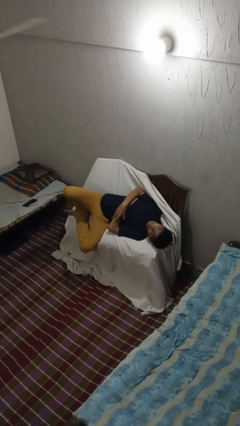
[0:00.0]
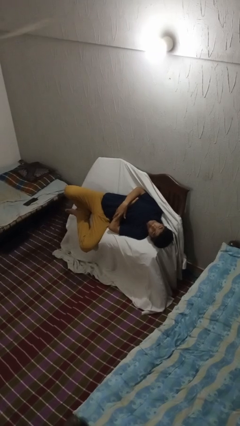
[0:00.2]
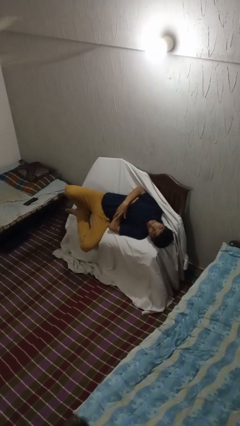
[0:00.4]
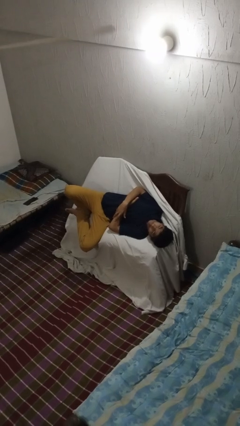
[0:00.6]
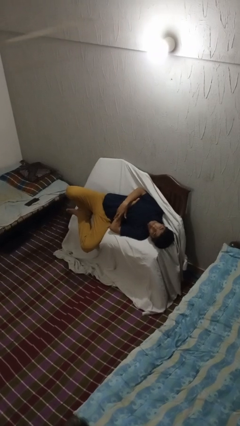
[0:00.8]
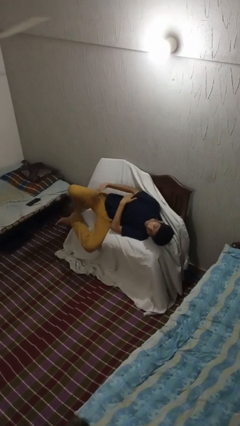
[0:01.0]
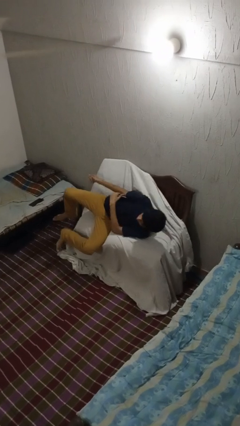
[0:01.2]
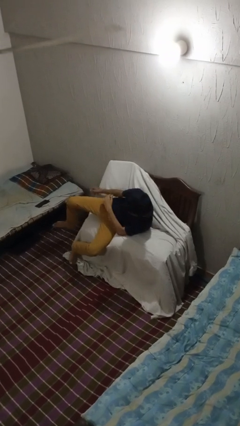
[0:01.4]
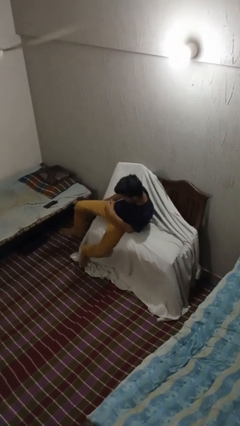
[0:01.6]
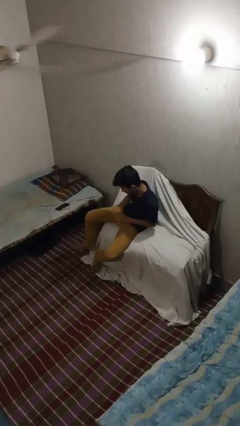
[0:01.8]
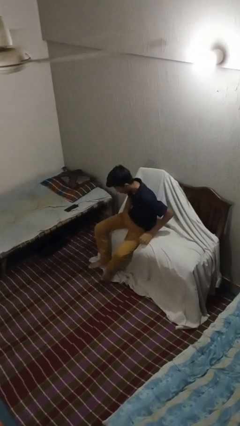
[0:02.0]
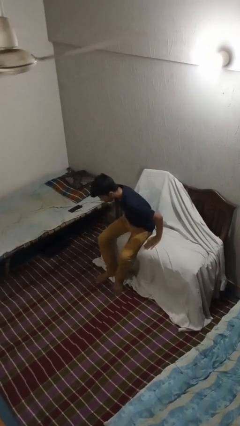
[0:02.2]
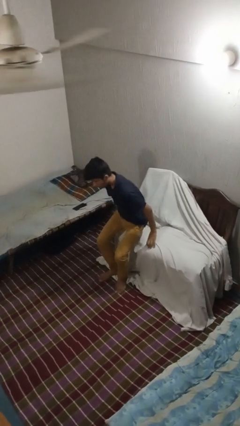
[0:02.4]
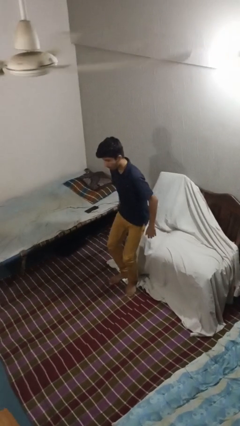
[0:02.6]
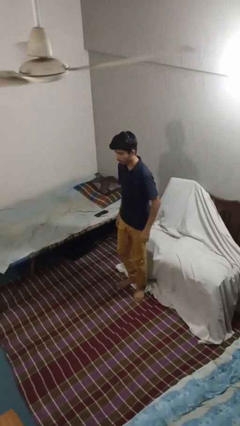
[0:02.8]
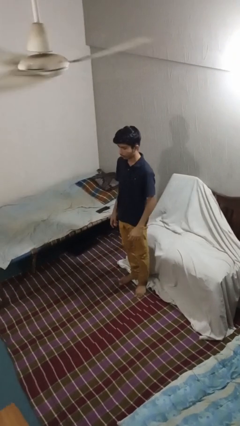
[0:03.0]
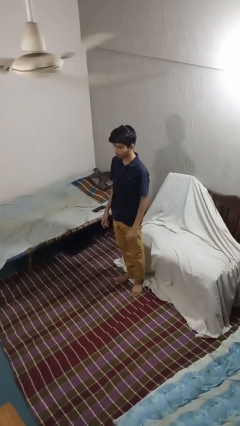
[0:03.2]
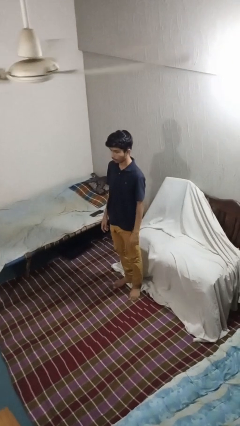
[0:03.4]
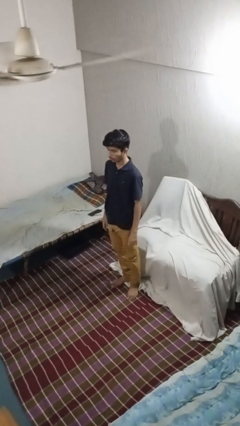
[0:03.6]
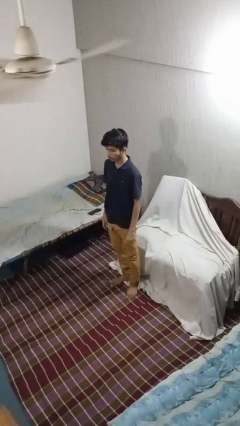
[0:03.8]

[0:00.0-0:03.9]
person stands up

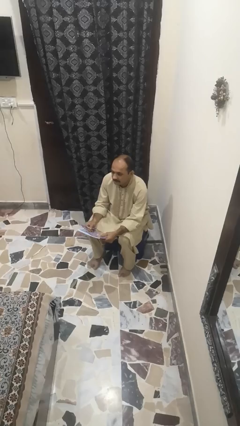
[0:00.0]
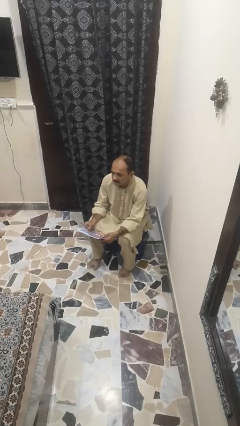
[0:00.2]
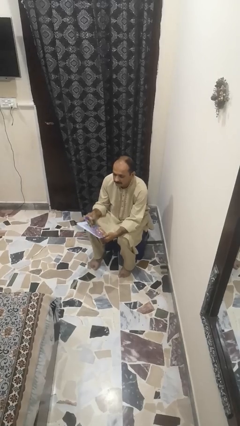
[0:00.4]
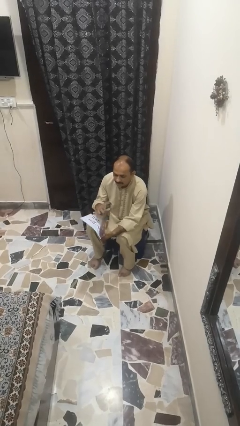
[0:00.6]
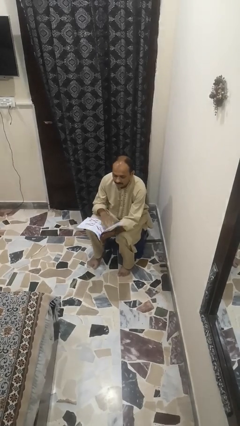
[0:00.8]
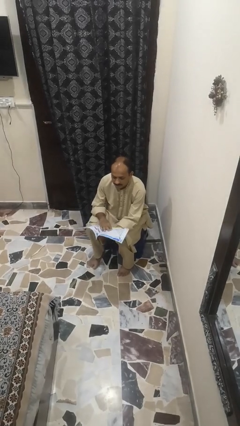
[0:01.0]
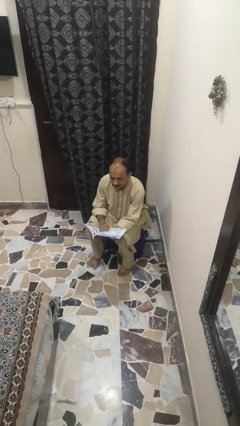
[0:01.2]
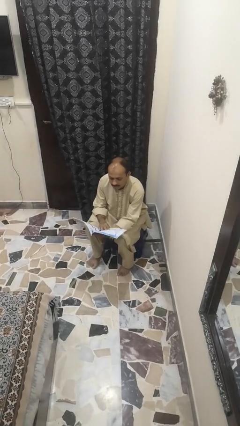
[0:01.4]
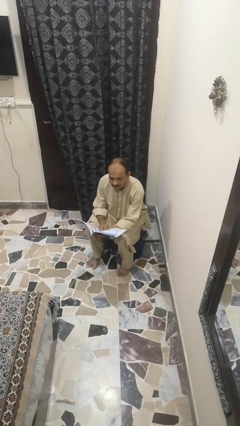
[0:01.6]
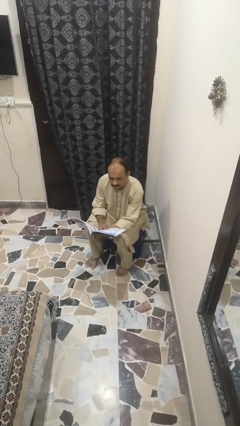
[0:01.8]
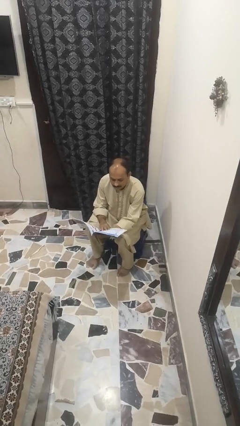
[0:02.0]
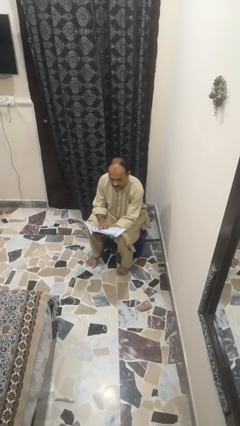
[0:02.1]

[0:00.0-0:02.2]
person reads magazine

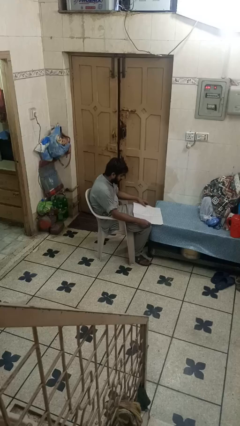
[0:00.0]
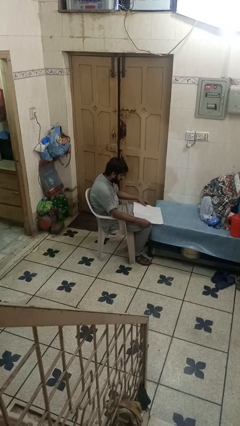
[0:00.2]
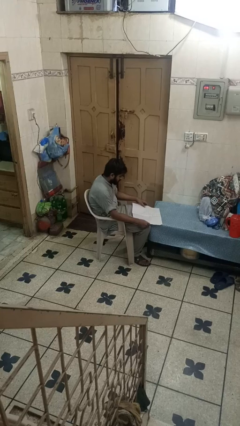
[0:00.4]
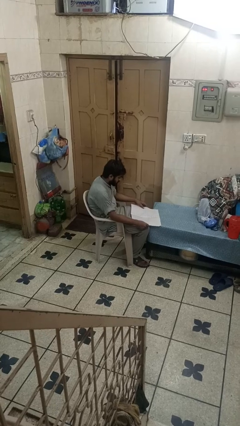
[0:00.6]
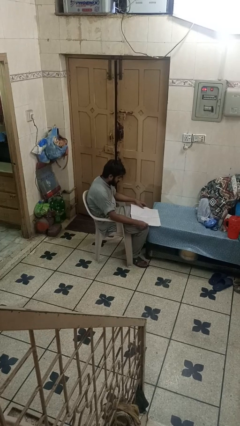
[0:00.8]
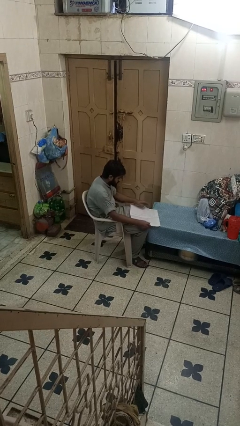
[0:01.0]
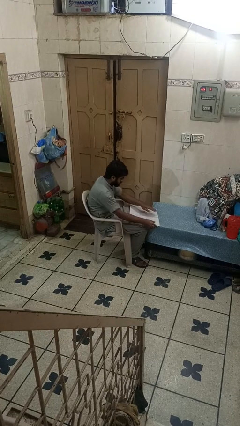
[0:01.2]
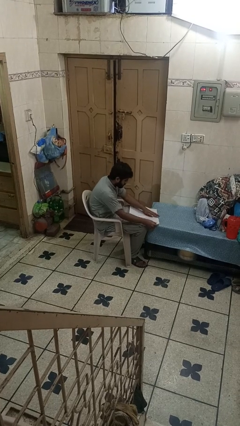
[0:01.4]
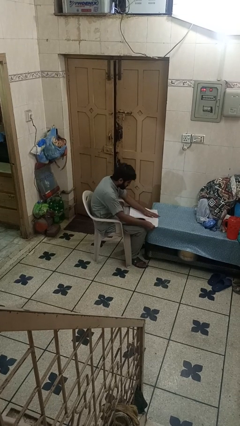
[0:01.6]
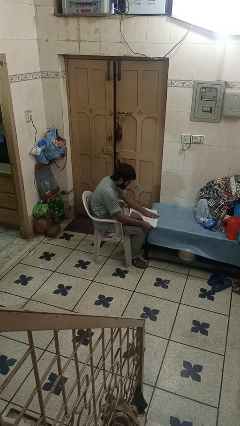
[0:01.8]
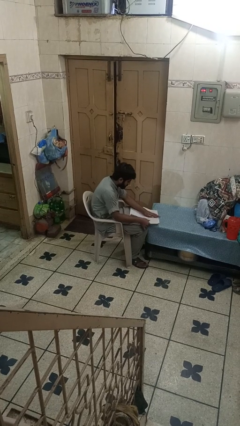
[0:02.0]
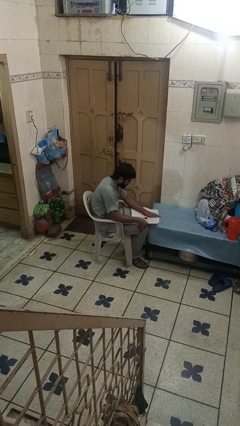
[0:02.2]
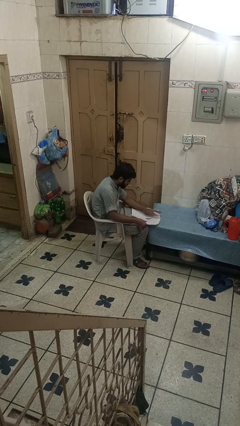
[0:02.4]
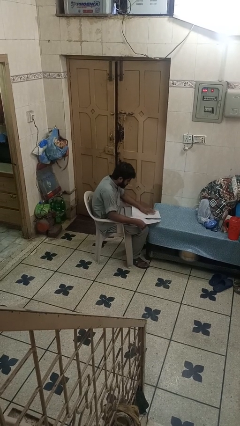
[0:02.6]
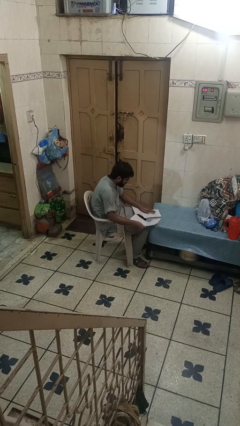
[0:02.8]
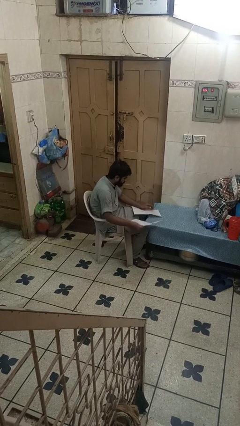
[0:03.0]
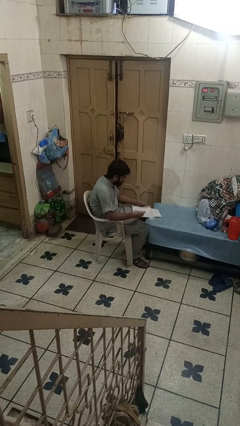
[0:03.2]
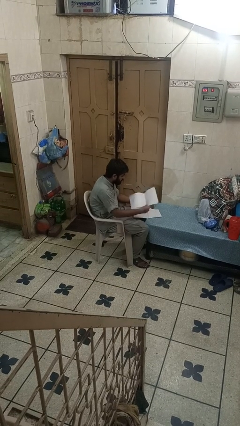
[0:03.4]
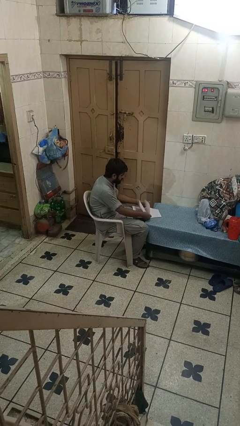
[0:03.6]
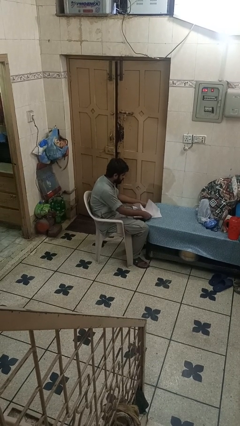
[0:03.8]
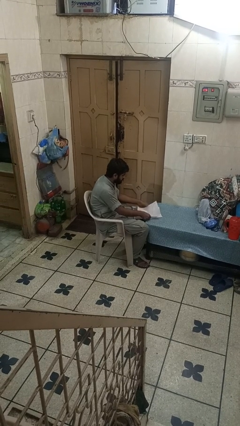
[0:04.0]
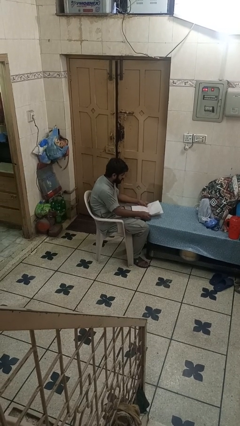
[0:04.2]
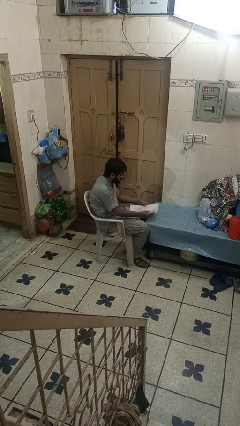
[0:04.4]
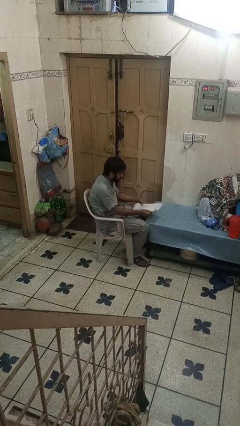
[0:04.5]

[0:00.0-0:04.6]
person tears paper

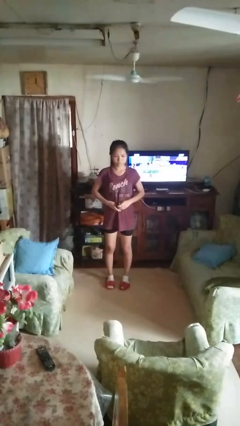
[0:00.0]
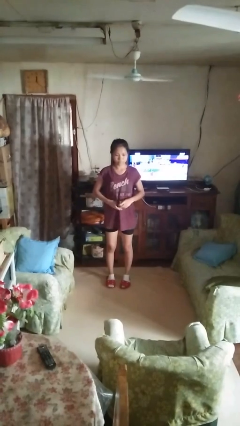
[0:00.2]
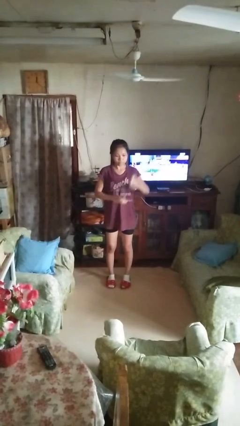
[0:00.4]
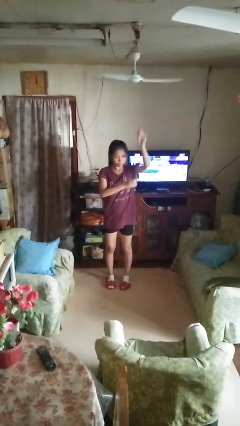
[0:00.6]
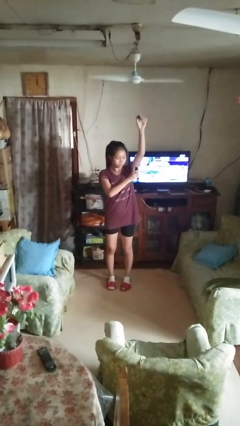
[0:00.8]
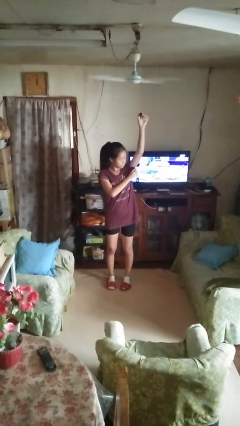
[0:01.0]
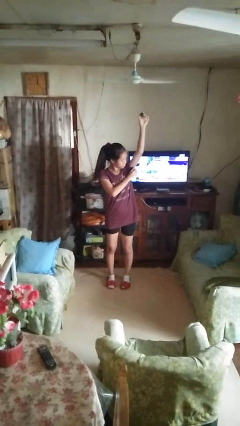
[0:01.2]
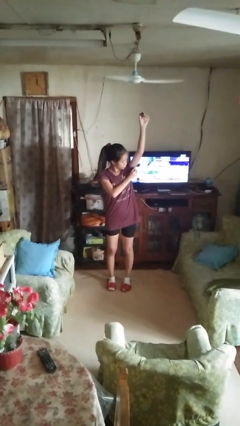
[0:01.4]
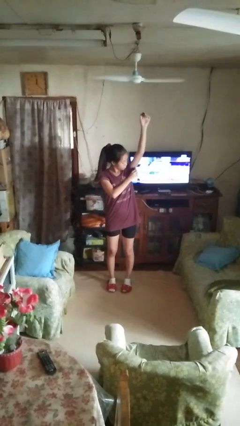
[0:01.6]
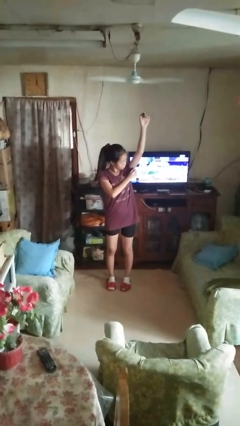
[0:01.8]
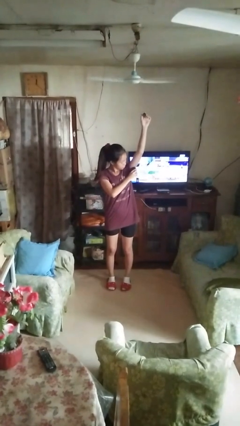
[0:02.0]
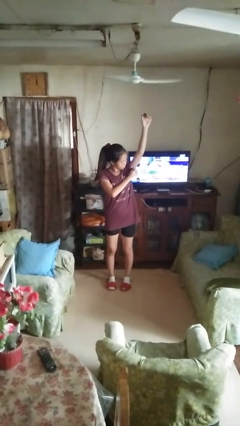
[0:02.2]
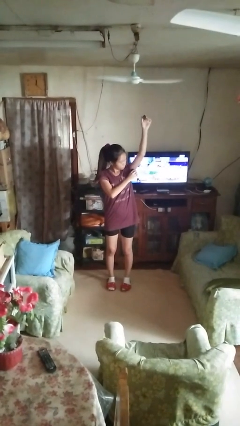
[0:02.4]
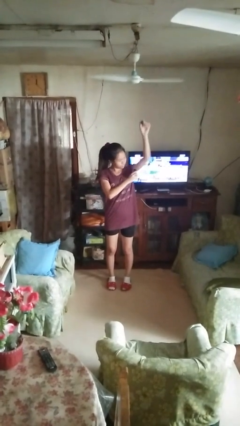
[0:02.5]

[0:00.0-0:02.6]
person applies deodorant

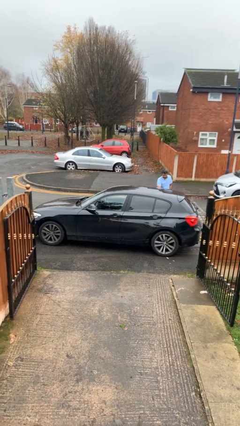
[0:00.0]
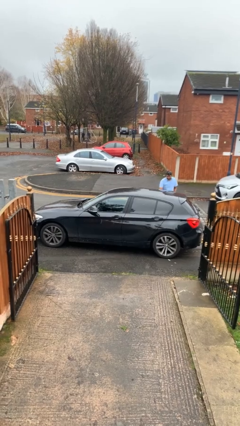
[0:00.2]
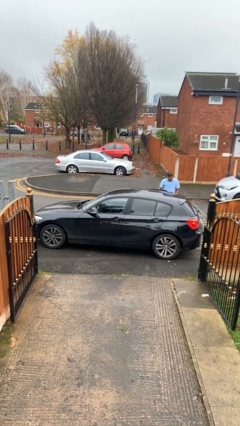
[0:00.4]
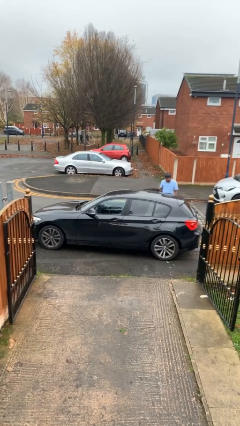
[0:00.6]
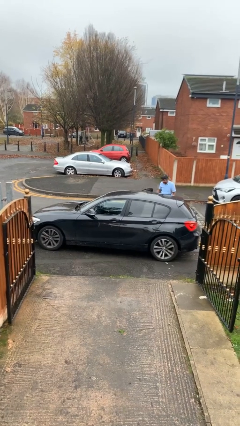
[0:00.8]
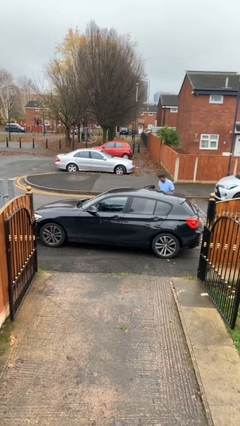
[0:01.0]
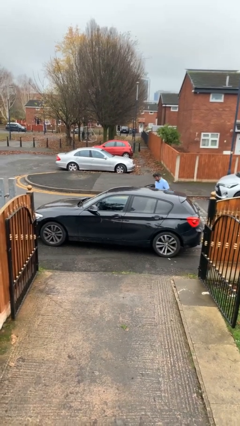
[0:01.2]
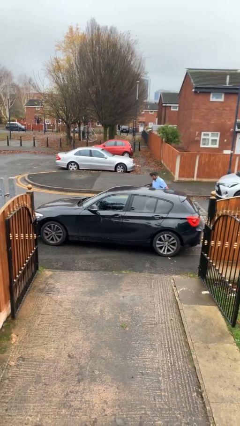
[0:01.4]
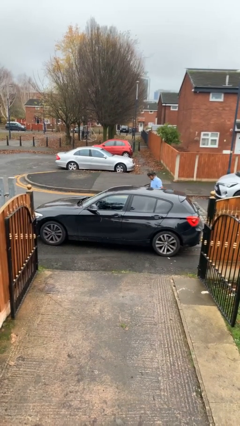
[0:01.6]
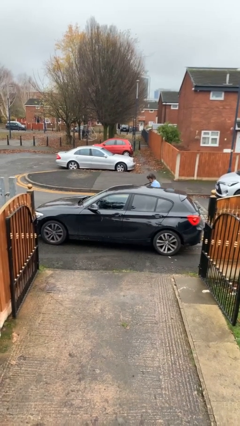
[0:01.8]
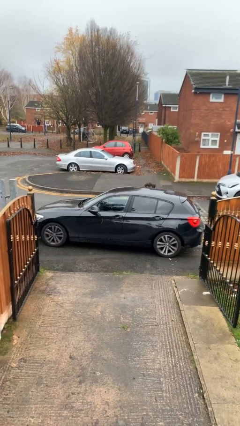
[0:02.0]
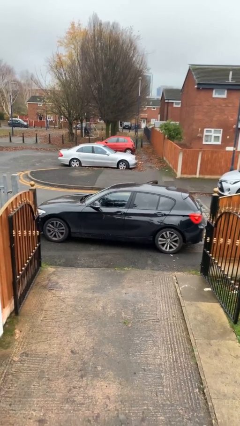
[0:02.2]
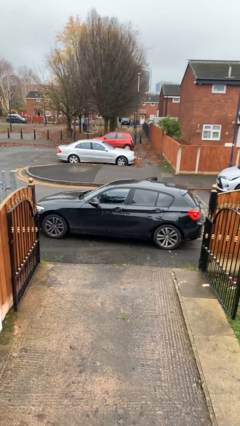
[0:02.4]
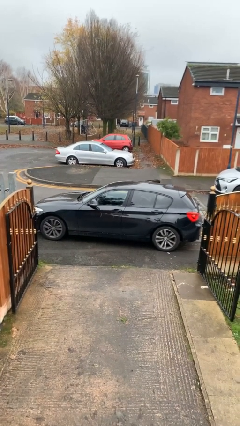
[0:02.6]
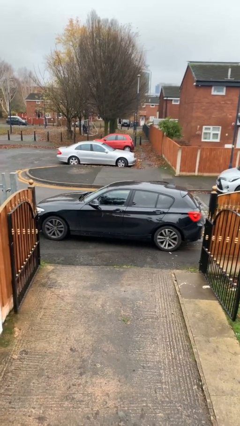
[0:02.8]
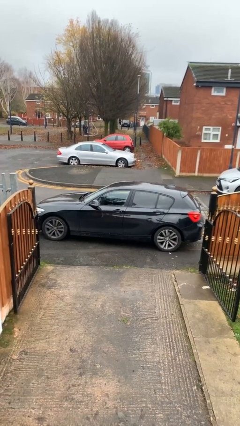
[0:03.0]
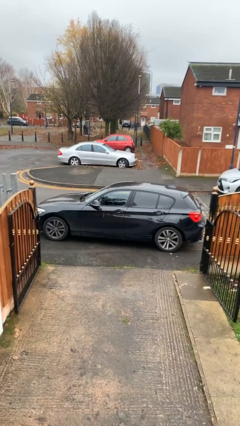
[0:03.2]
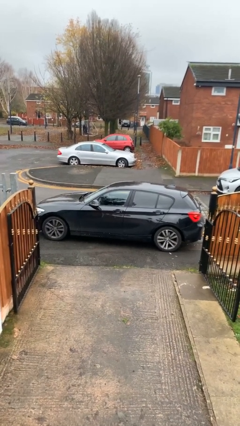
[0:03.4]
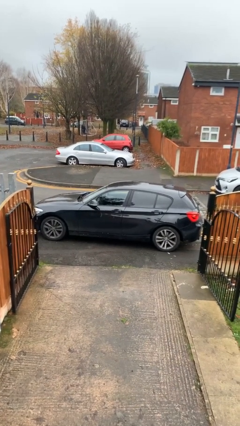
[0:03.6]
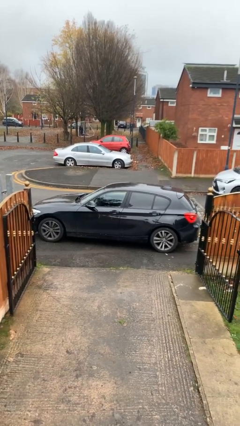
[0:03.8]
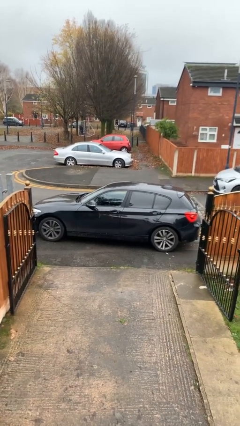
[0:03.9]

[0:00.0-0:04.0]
car picks up person

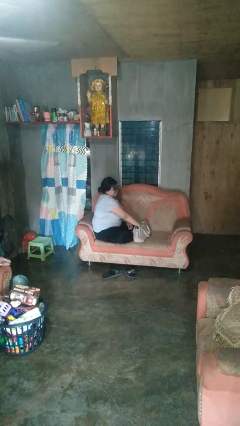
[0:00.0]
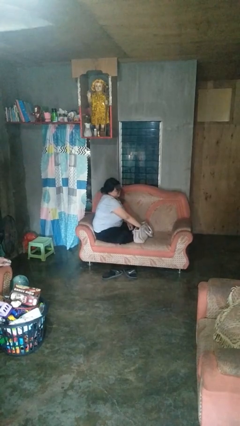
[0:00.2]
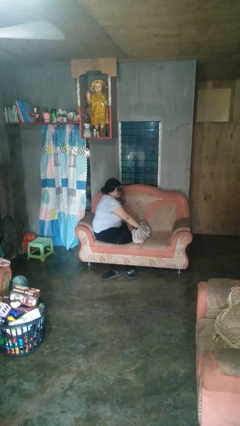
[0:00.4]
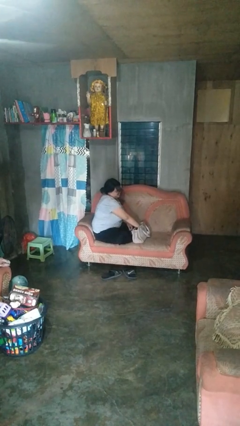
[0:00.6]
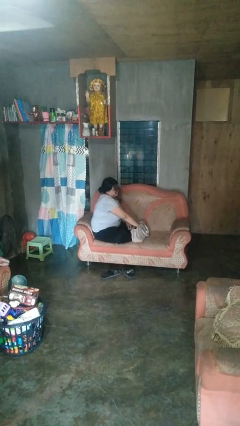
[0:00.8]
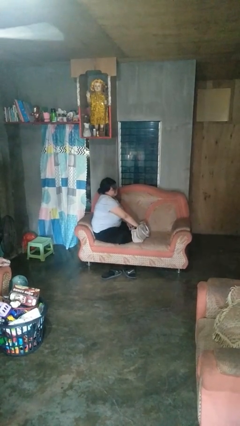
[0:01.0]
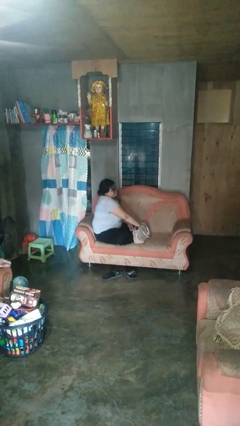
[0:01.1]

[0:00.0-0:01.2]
person takes object from purse
